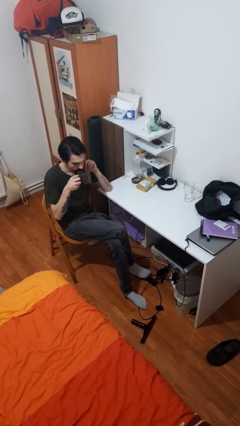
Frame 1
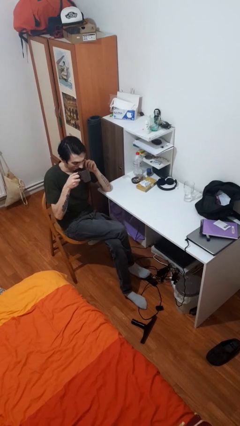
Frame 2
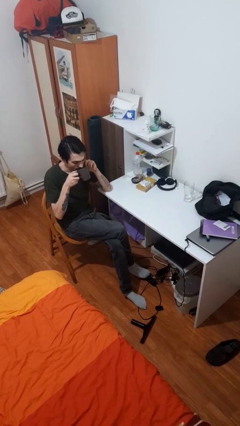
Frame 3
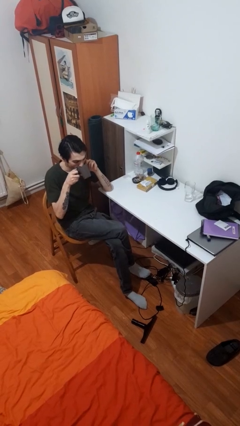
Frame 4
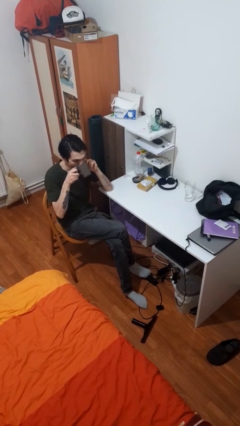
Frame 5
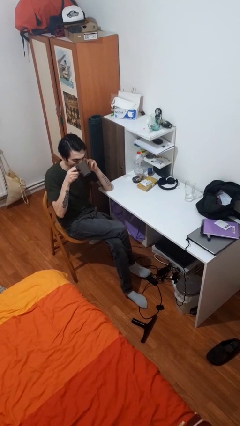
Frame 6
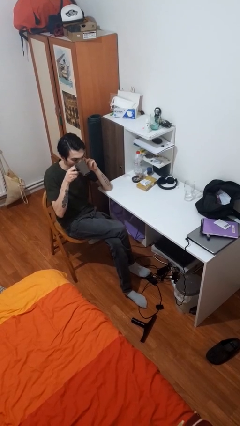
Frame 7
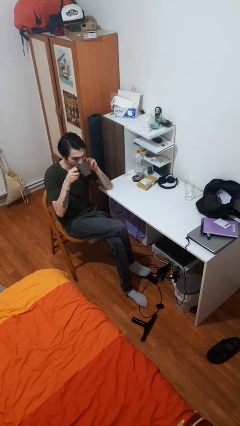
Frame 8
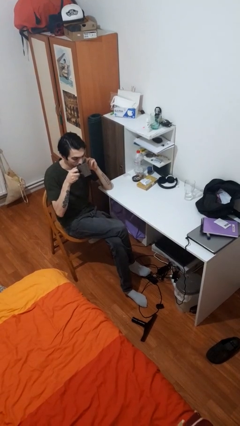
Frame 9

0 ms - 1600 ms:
person drinks from mug

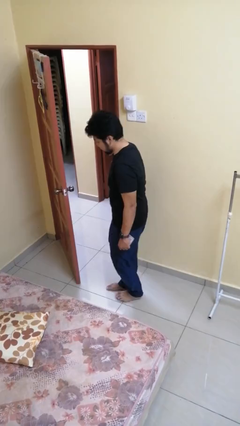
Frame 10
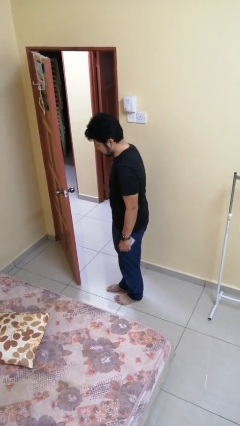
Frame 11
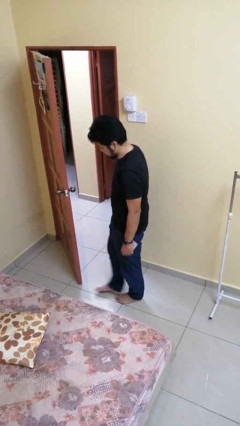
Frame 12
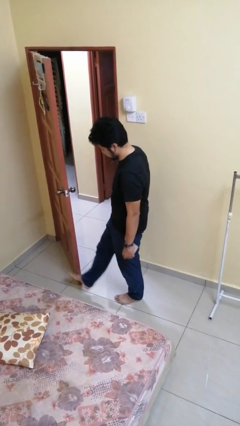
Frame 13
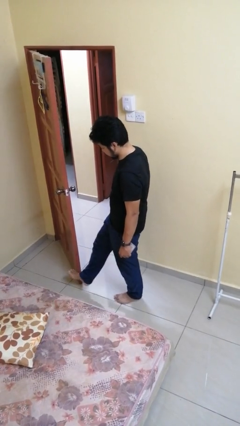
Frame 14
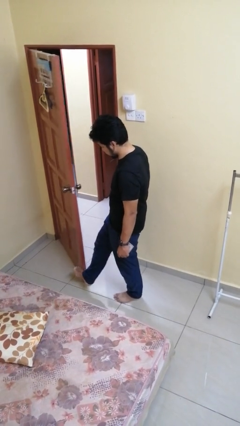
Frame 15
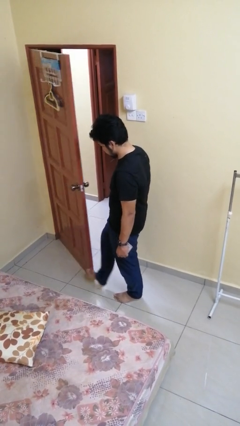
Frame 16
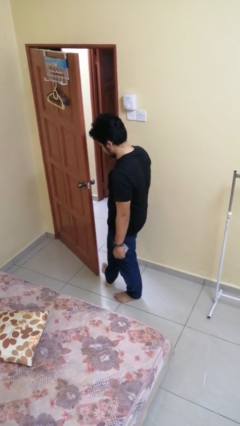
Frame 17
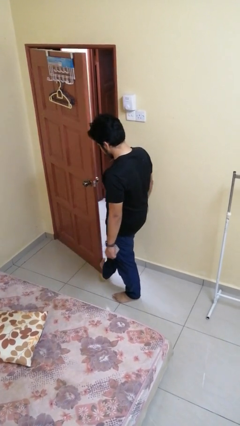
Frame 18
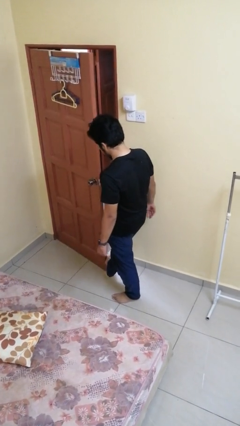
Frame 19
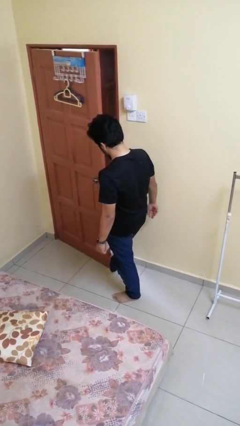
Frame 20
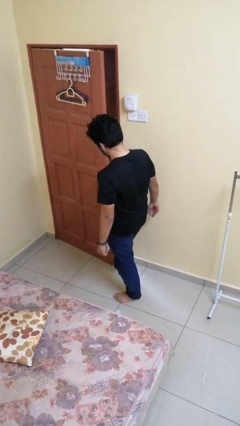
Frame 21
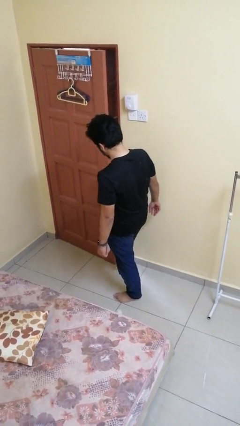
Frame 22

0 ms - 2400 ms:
person closes door with foot

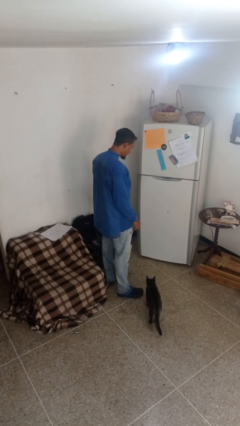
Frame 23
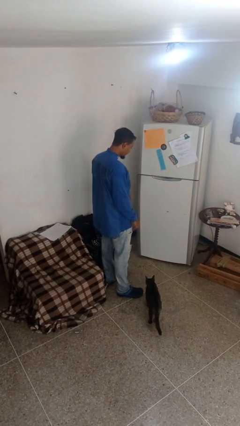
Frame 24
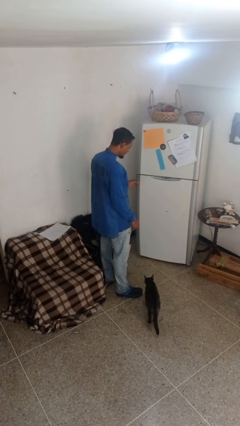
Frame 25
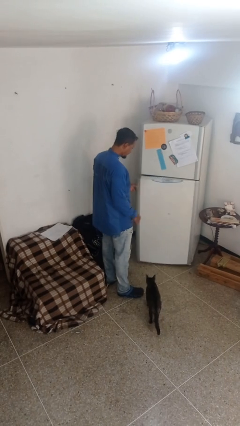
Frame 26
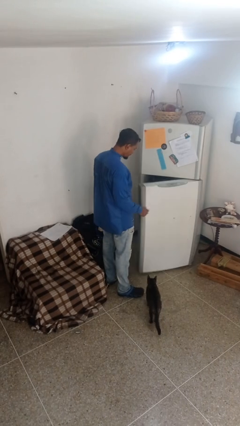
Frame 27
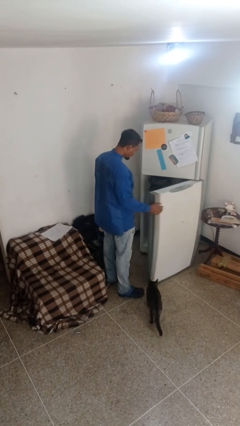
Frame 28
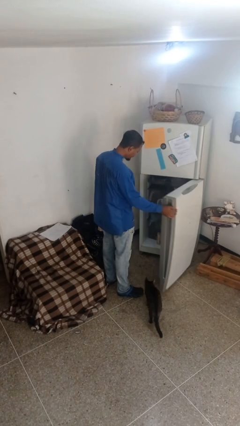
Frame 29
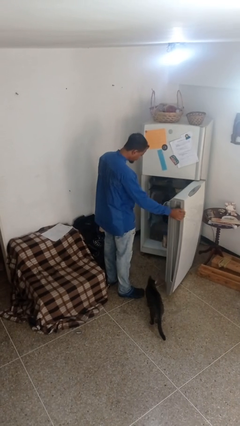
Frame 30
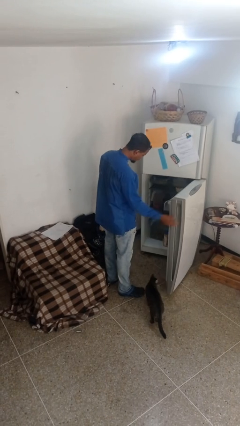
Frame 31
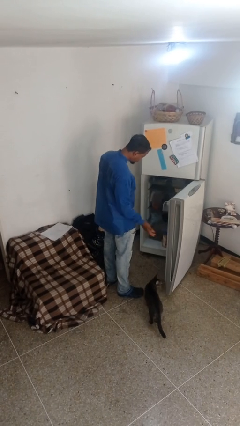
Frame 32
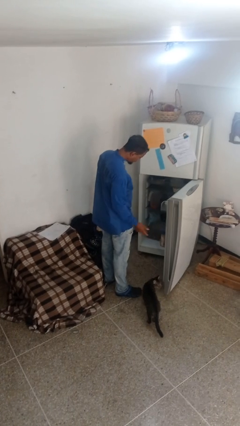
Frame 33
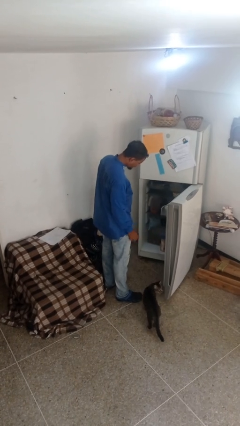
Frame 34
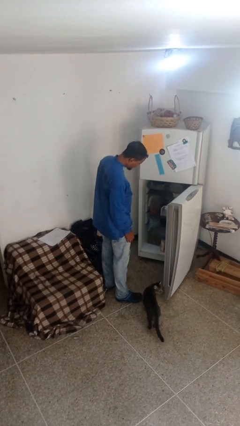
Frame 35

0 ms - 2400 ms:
person opens refrigerator

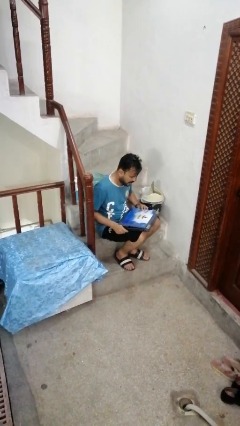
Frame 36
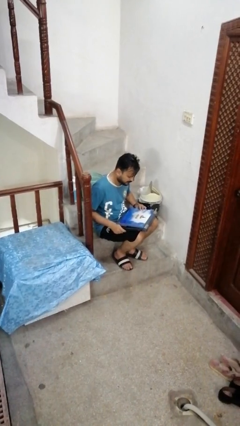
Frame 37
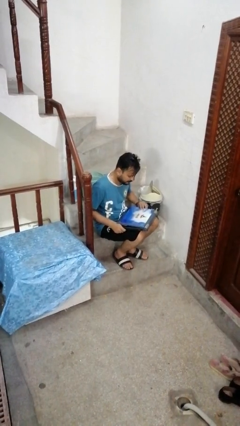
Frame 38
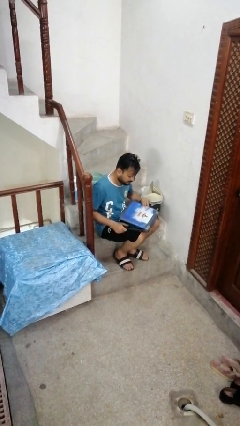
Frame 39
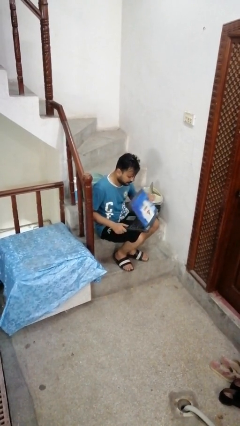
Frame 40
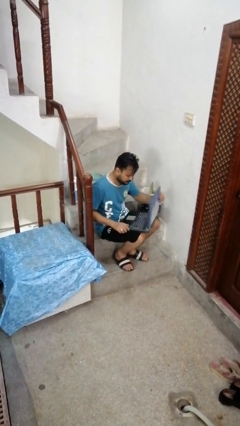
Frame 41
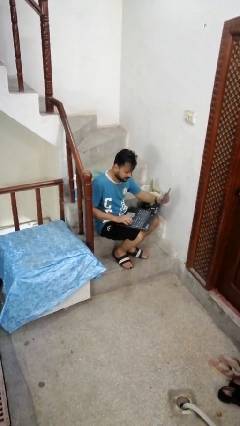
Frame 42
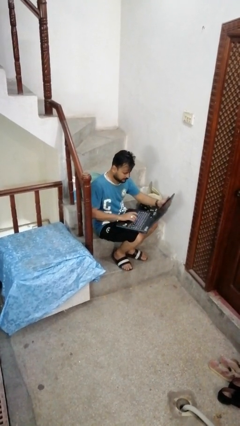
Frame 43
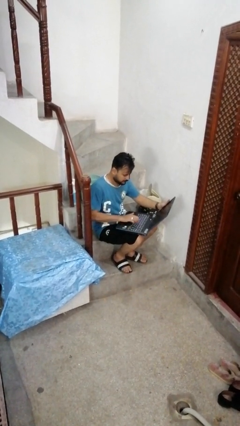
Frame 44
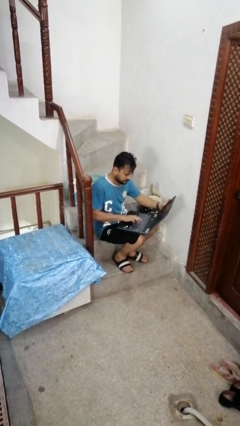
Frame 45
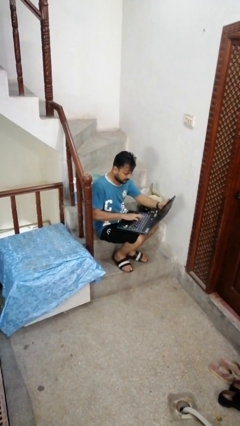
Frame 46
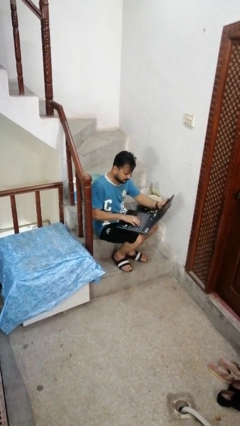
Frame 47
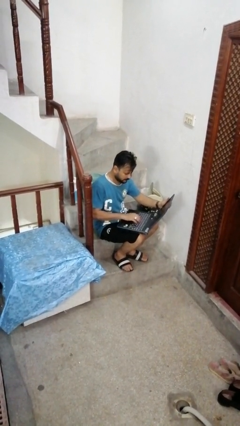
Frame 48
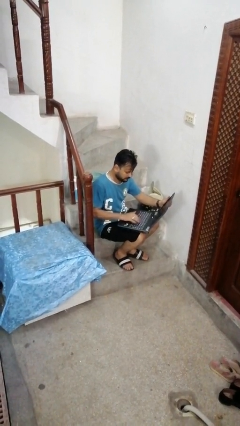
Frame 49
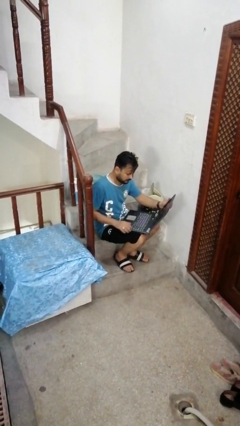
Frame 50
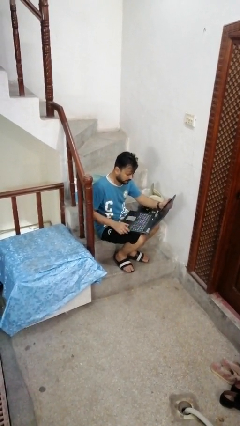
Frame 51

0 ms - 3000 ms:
person opens laptop

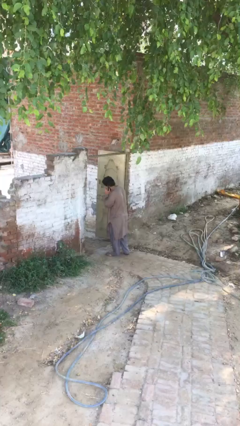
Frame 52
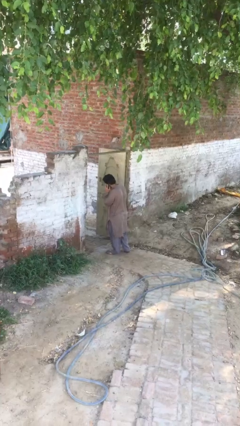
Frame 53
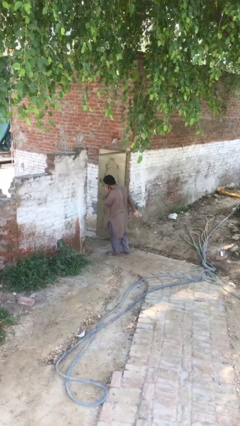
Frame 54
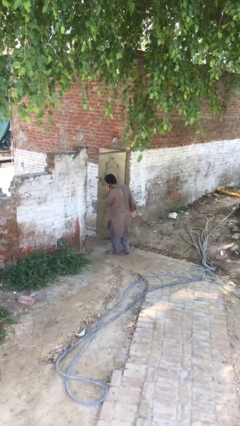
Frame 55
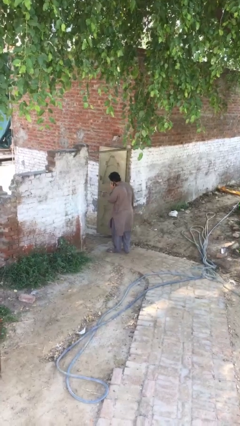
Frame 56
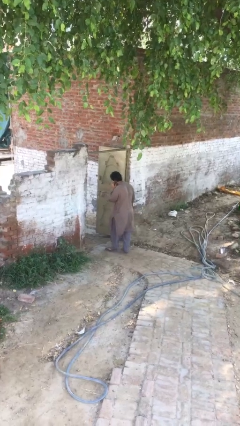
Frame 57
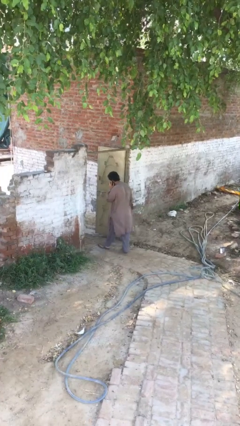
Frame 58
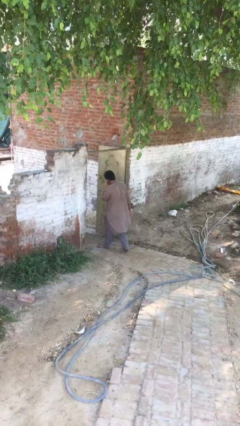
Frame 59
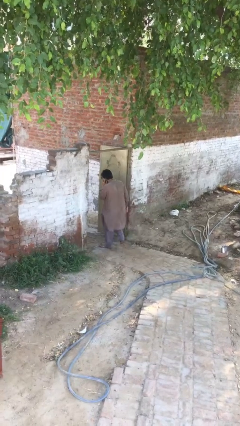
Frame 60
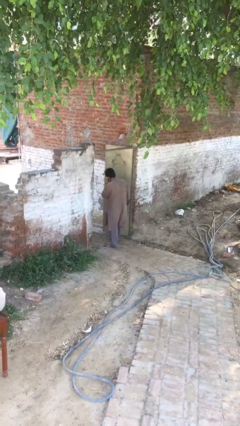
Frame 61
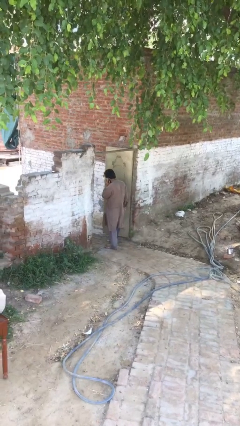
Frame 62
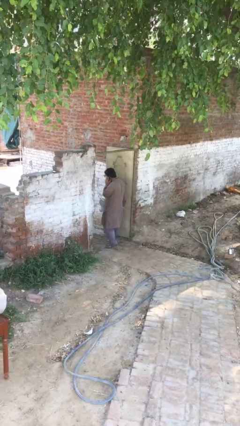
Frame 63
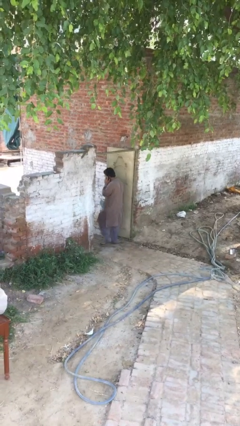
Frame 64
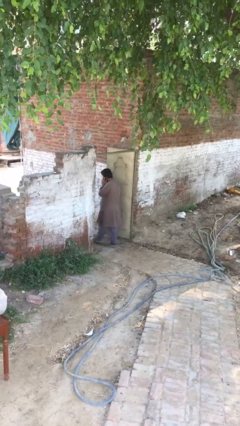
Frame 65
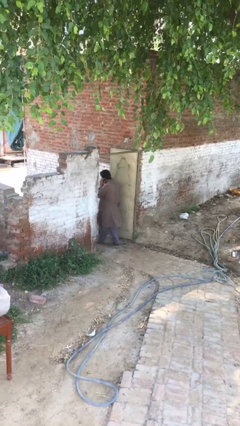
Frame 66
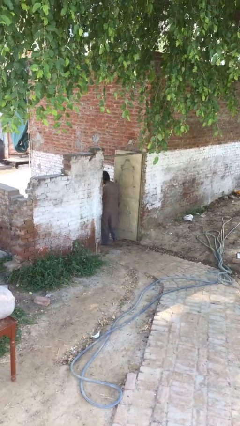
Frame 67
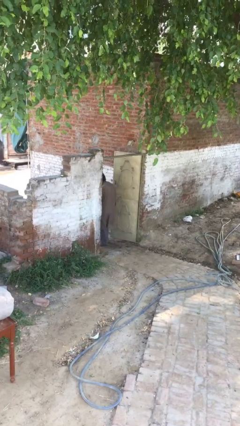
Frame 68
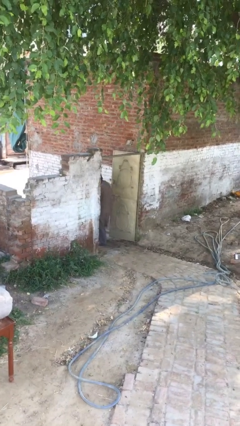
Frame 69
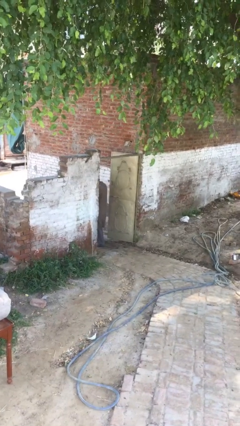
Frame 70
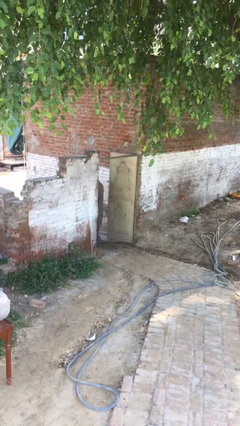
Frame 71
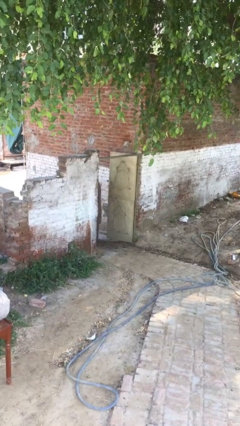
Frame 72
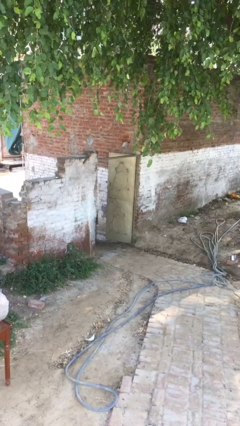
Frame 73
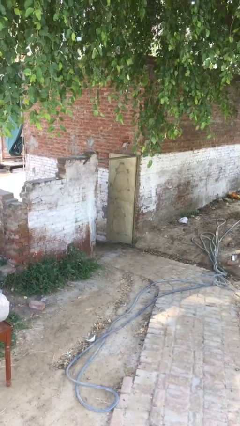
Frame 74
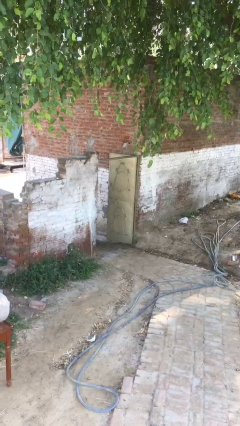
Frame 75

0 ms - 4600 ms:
person exits scene through structure

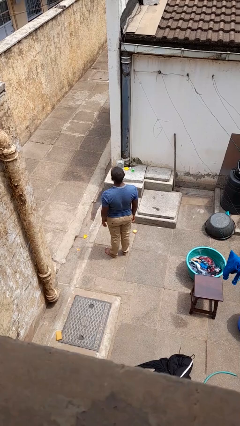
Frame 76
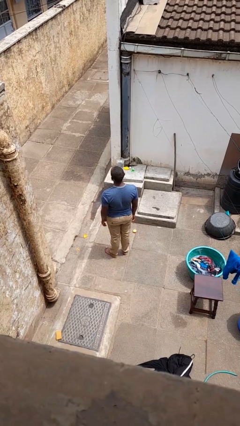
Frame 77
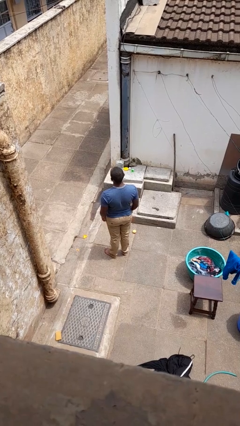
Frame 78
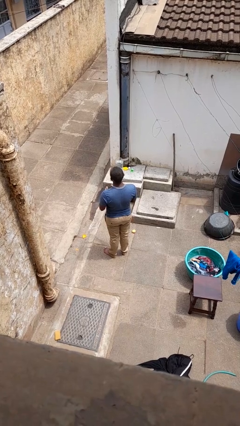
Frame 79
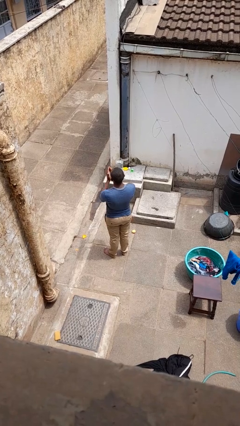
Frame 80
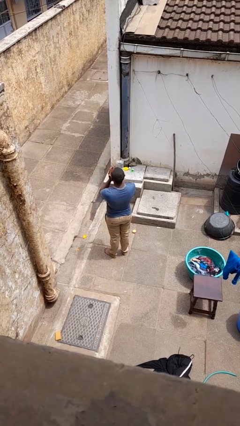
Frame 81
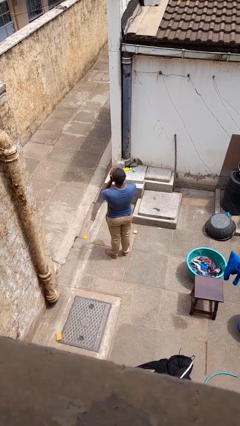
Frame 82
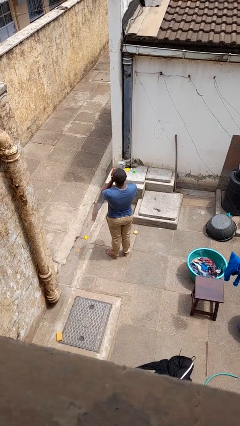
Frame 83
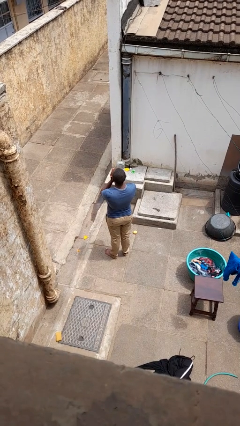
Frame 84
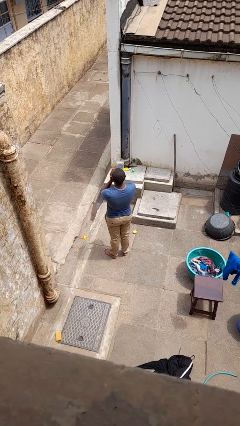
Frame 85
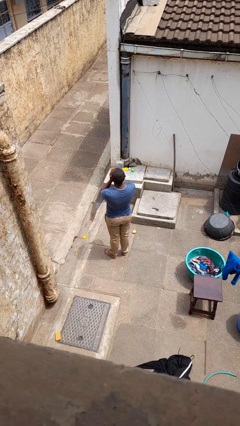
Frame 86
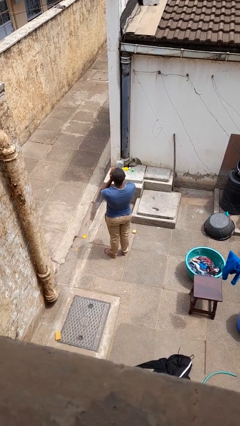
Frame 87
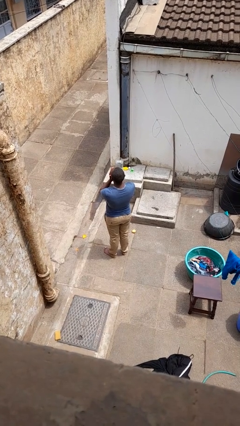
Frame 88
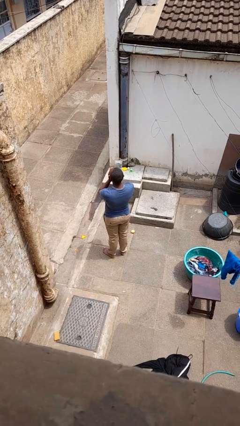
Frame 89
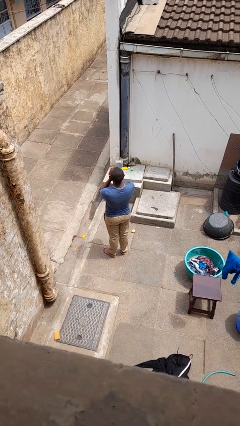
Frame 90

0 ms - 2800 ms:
person blows into hands

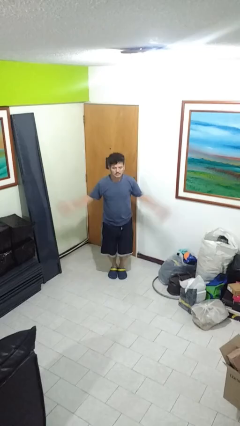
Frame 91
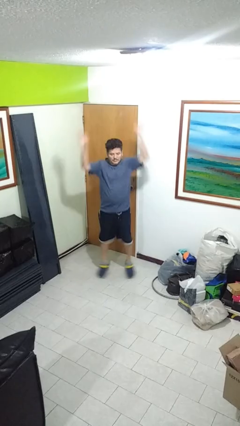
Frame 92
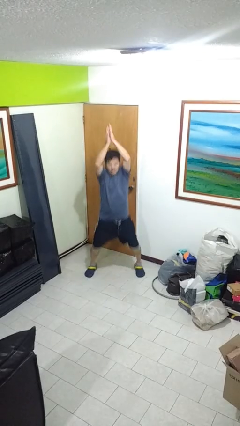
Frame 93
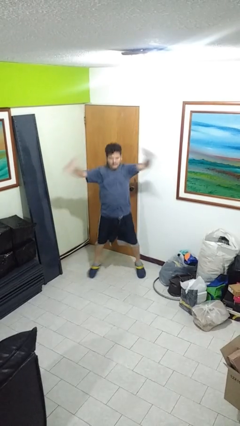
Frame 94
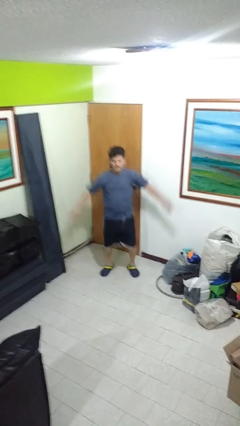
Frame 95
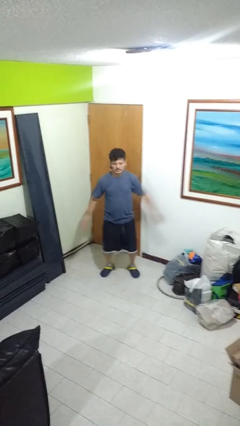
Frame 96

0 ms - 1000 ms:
person exercises with jumping jacks
